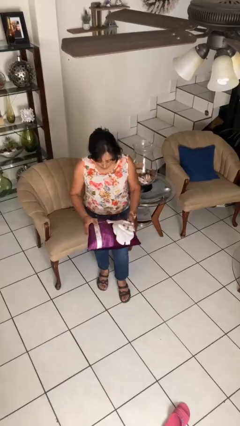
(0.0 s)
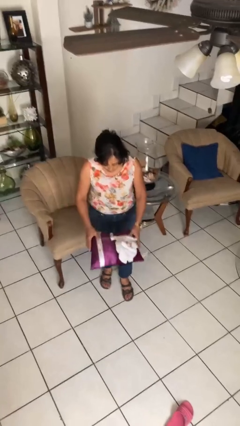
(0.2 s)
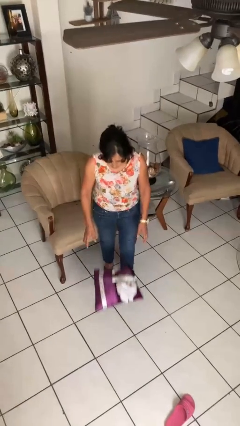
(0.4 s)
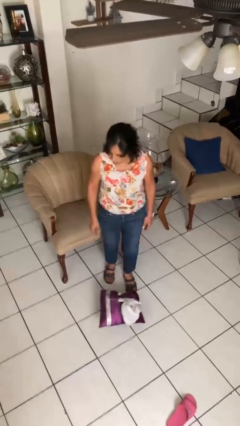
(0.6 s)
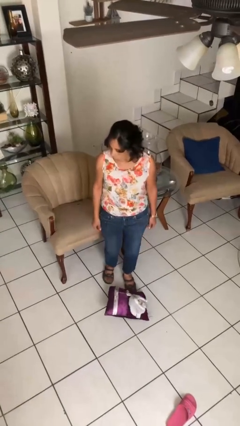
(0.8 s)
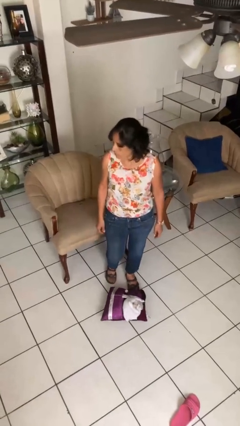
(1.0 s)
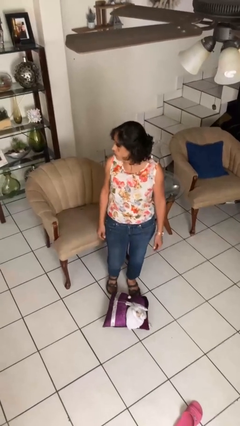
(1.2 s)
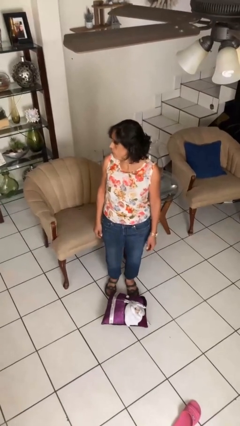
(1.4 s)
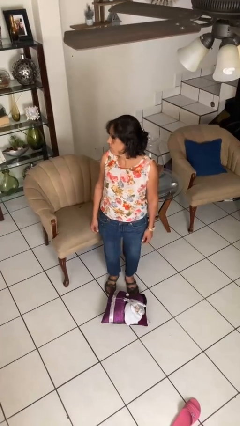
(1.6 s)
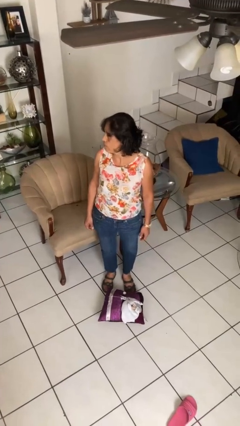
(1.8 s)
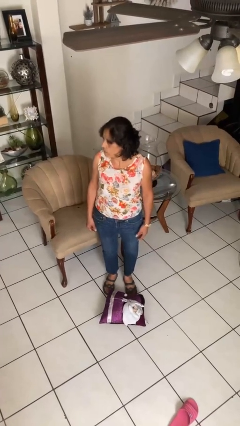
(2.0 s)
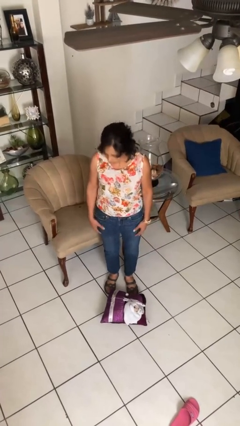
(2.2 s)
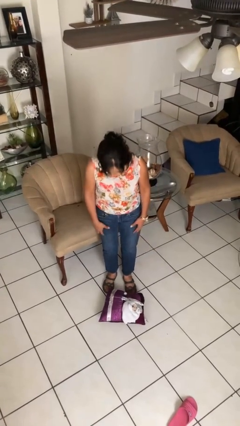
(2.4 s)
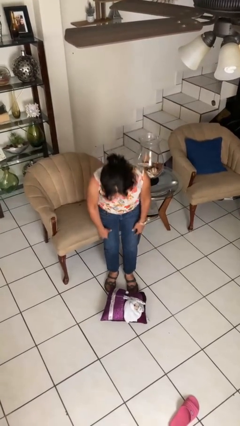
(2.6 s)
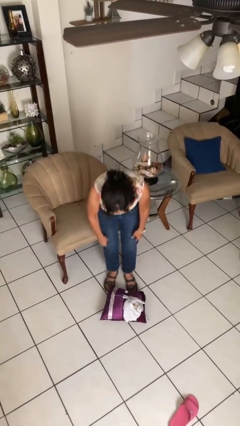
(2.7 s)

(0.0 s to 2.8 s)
person drops object

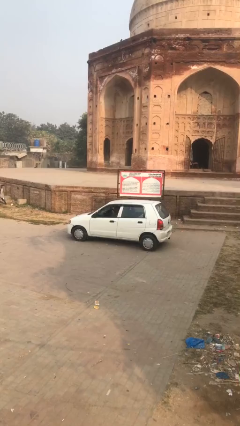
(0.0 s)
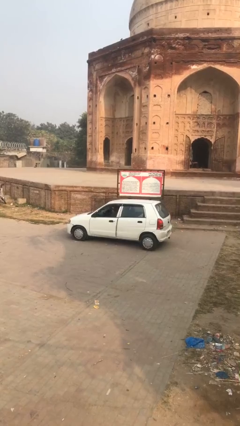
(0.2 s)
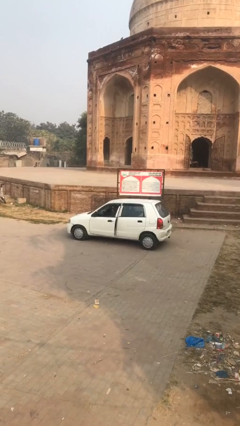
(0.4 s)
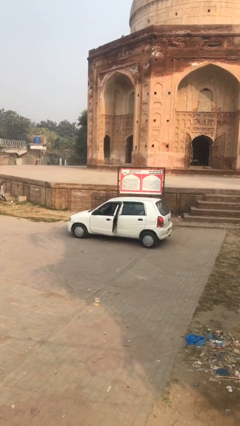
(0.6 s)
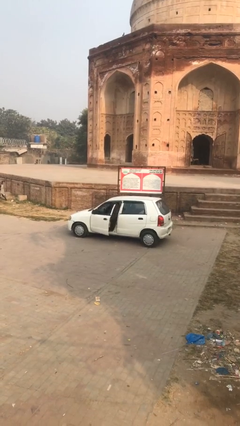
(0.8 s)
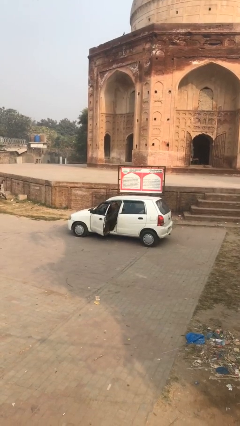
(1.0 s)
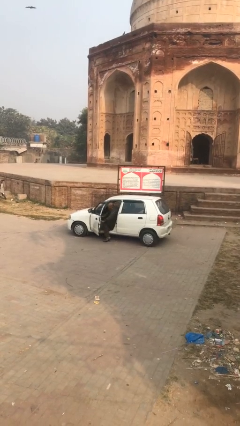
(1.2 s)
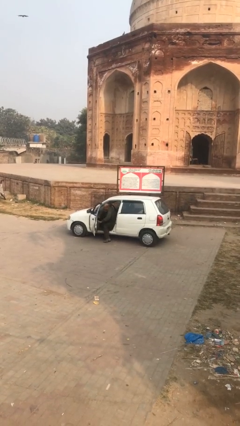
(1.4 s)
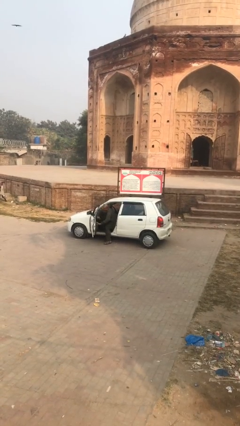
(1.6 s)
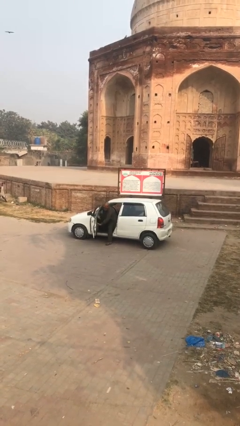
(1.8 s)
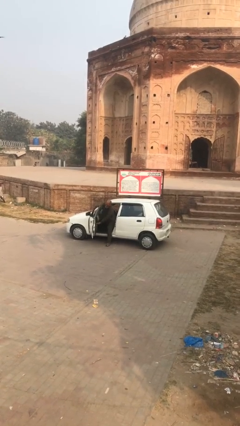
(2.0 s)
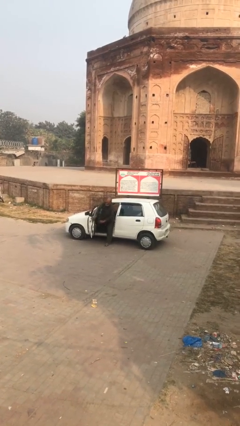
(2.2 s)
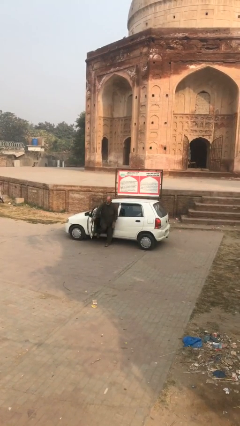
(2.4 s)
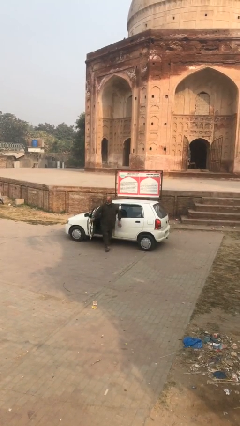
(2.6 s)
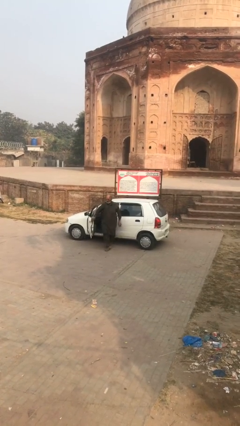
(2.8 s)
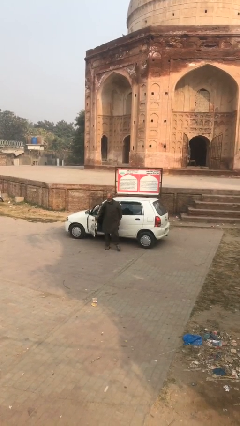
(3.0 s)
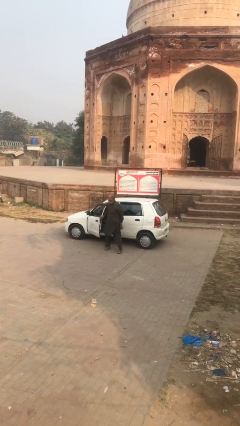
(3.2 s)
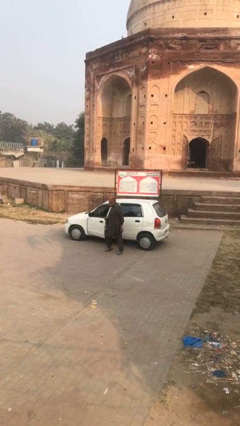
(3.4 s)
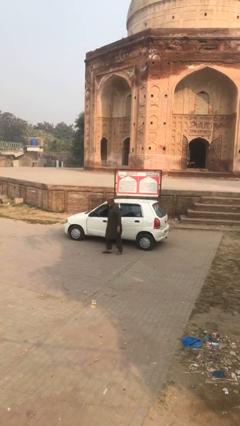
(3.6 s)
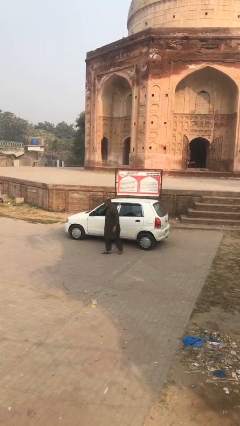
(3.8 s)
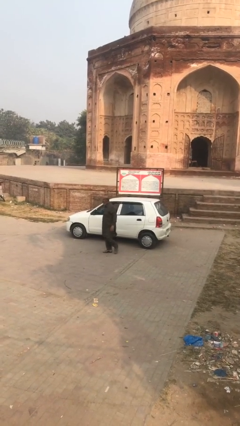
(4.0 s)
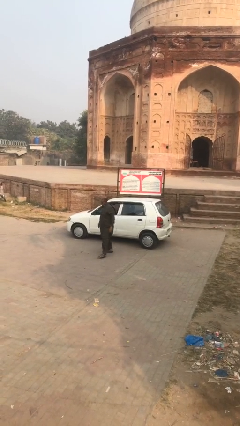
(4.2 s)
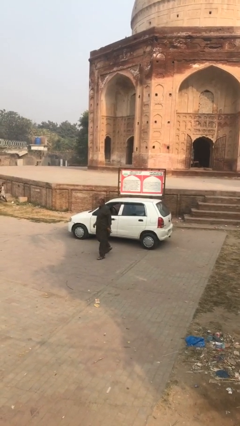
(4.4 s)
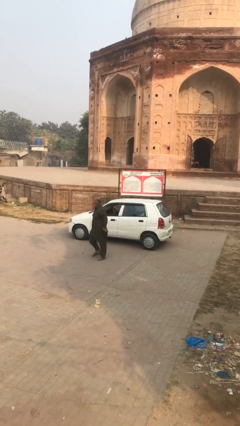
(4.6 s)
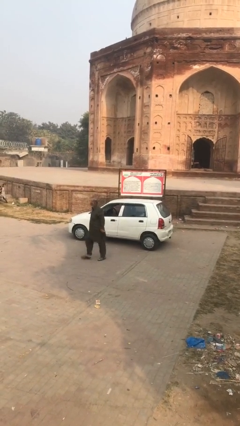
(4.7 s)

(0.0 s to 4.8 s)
car drops off person

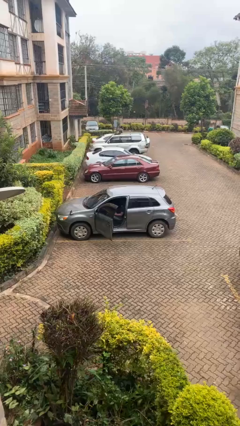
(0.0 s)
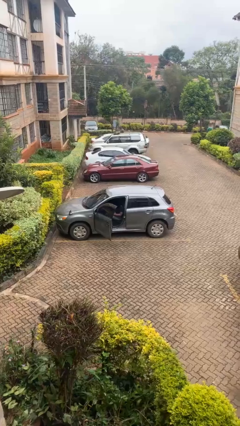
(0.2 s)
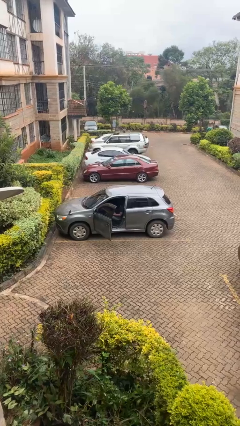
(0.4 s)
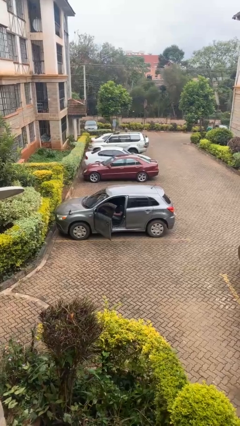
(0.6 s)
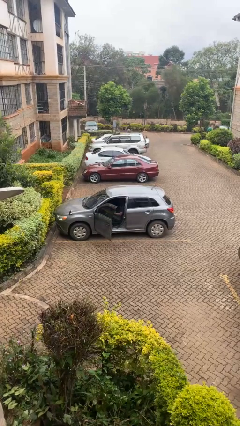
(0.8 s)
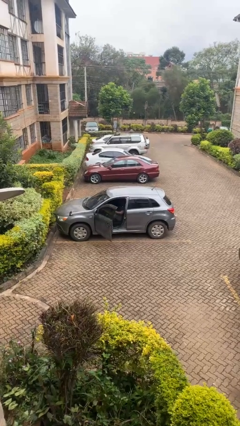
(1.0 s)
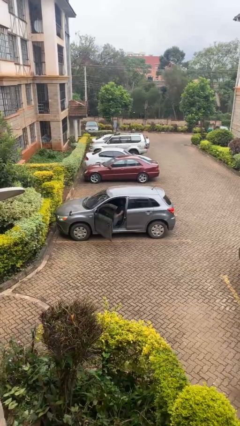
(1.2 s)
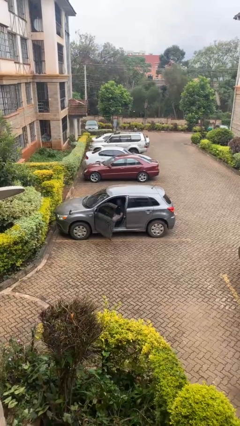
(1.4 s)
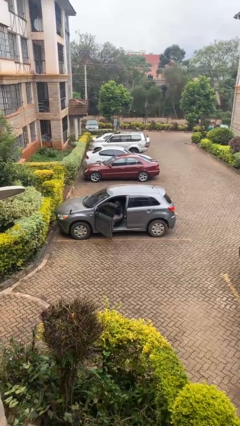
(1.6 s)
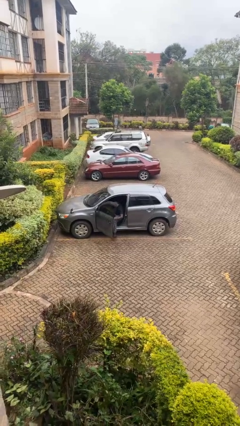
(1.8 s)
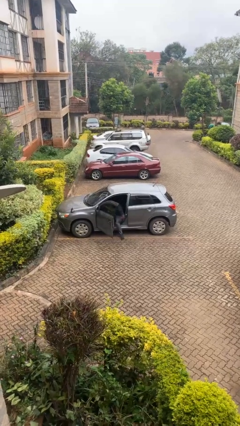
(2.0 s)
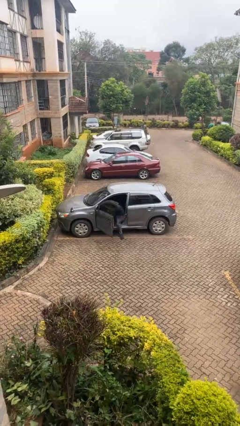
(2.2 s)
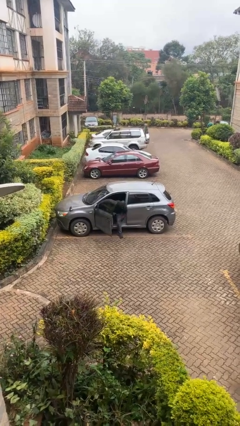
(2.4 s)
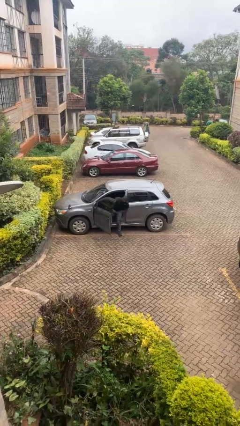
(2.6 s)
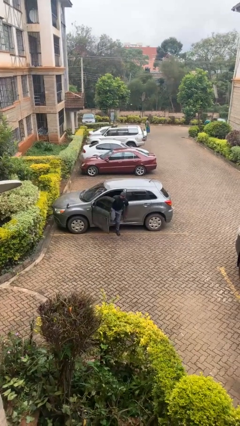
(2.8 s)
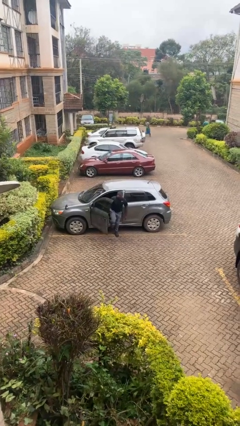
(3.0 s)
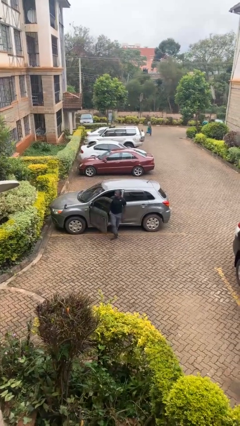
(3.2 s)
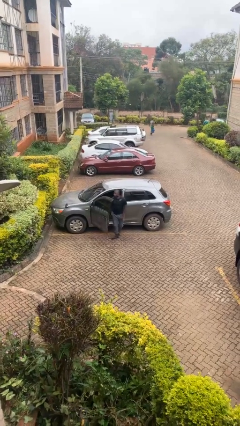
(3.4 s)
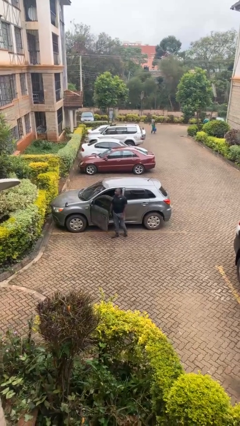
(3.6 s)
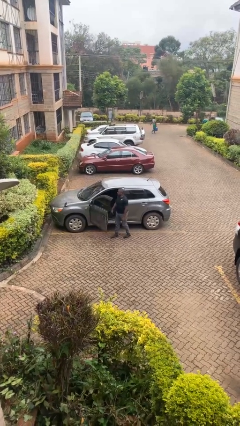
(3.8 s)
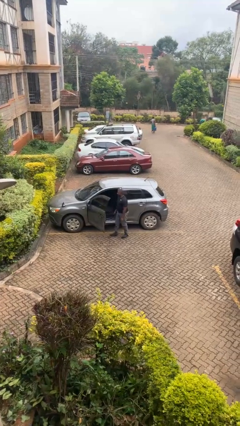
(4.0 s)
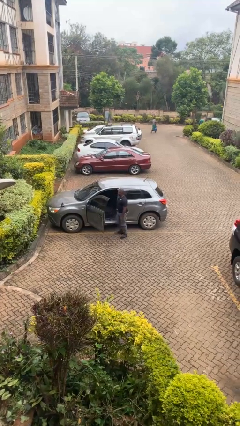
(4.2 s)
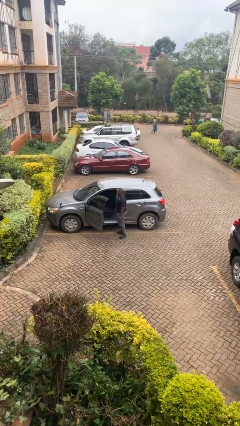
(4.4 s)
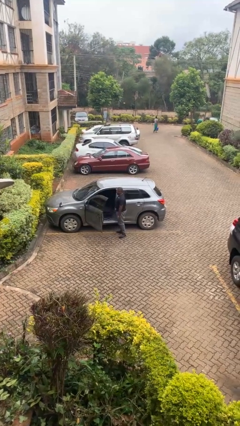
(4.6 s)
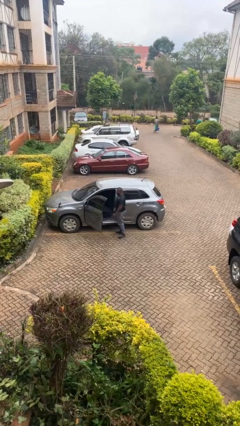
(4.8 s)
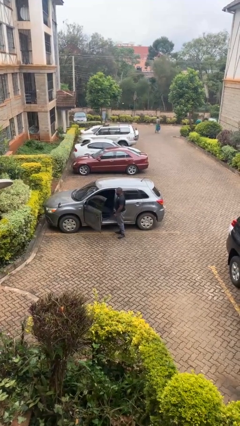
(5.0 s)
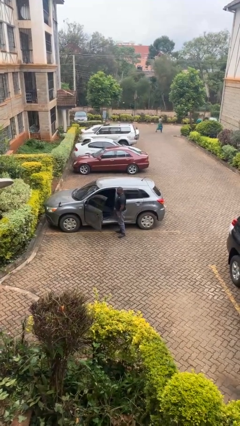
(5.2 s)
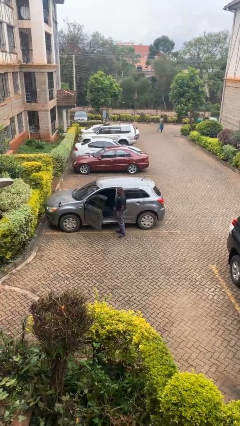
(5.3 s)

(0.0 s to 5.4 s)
person exits car

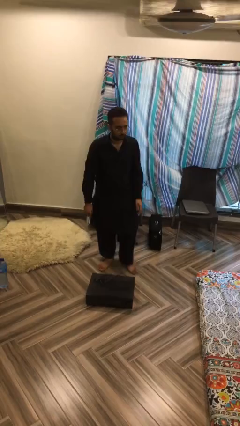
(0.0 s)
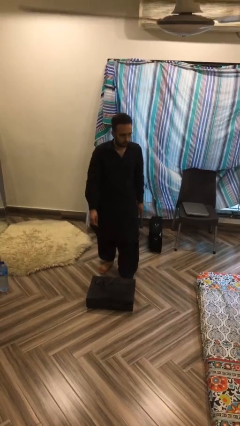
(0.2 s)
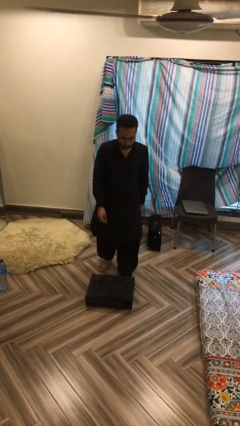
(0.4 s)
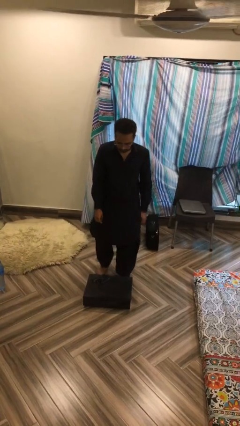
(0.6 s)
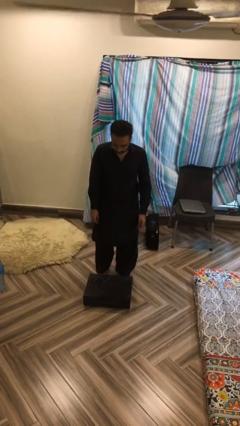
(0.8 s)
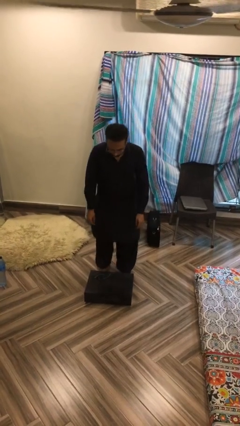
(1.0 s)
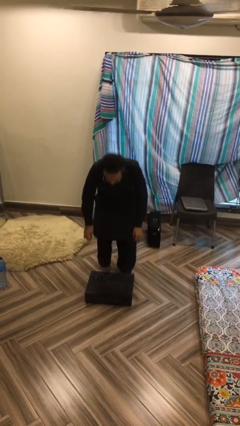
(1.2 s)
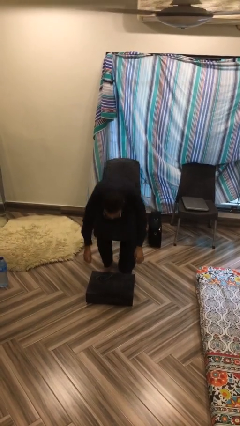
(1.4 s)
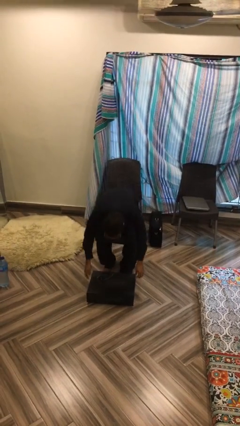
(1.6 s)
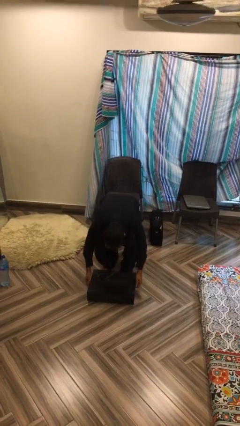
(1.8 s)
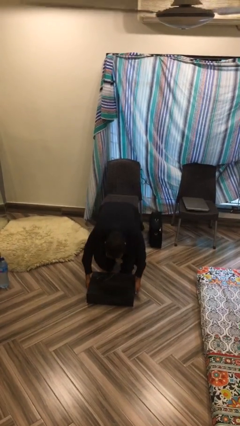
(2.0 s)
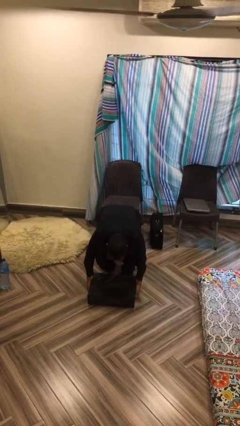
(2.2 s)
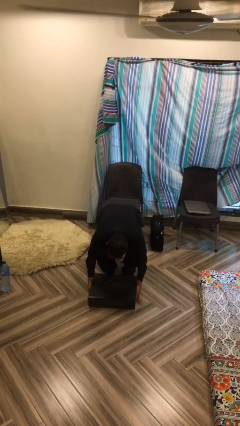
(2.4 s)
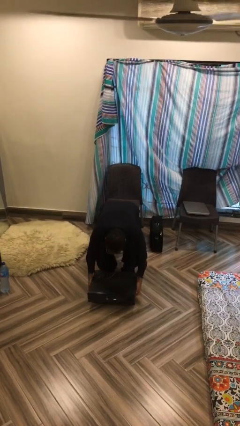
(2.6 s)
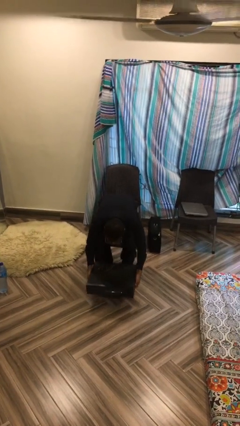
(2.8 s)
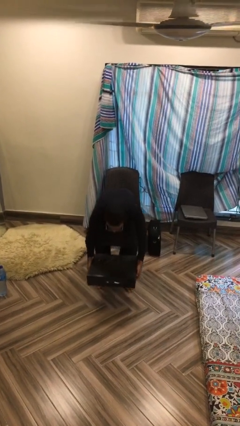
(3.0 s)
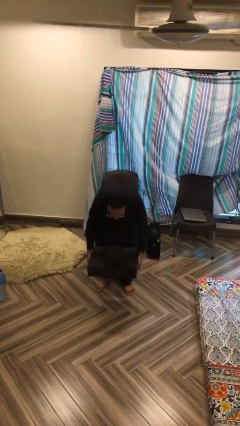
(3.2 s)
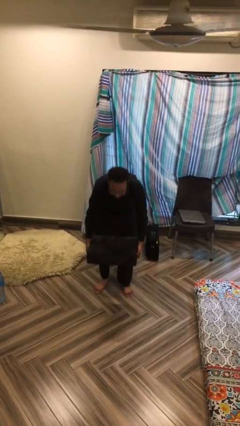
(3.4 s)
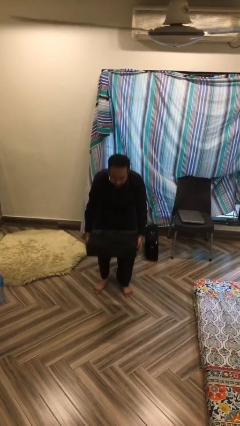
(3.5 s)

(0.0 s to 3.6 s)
person picks up object from floor

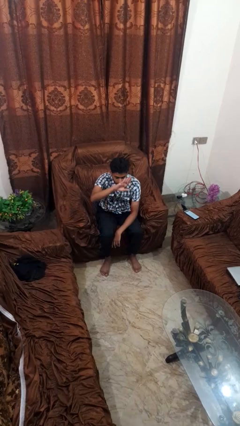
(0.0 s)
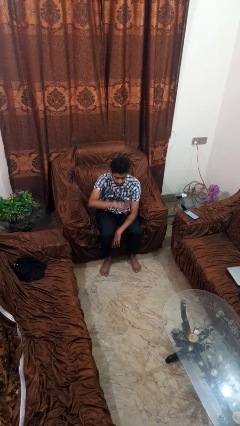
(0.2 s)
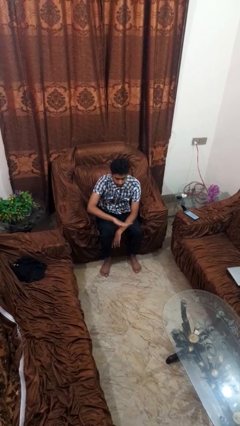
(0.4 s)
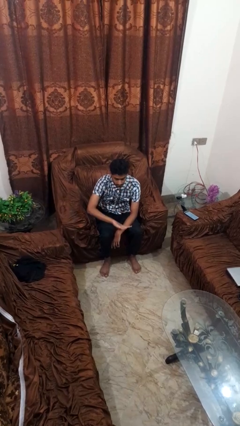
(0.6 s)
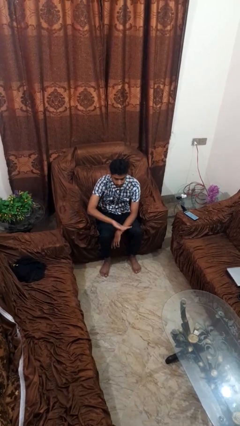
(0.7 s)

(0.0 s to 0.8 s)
person gestures swipe down

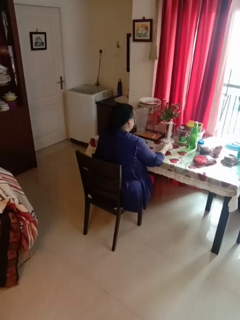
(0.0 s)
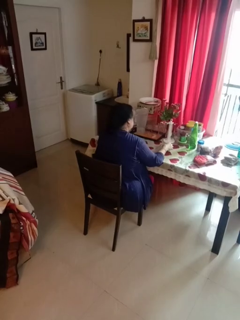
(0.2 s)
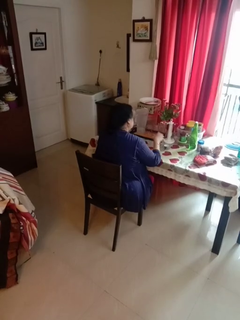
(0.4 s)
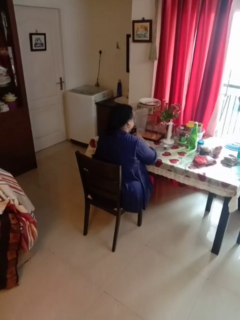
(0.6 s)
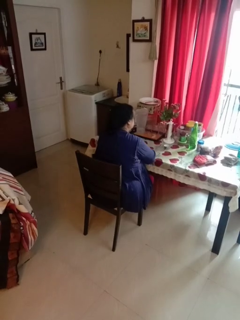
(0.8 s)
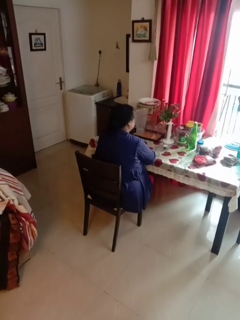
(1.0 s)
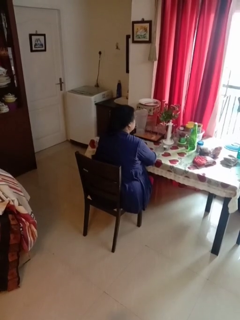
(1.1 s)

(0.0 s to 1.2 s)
person puts down object on table
